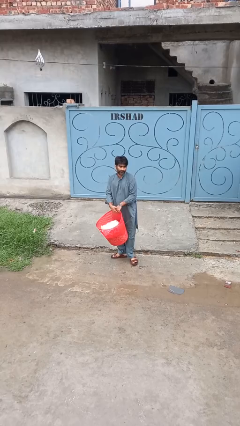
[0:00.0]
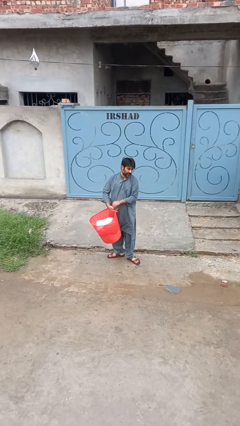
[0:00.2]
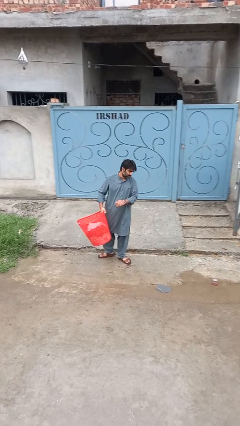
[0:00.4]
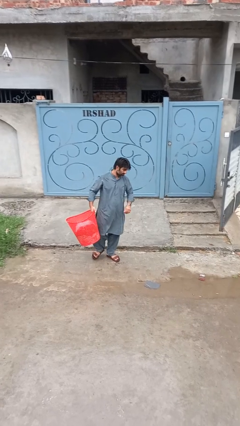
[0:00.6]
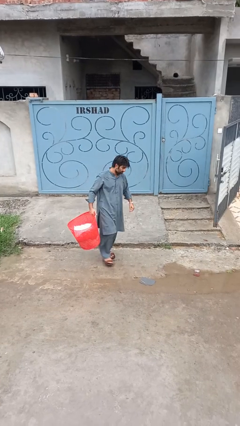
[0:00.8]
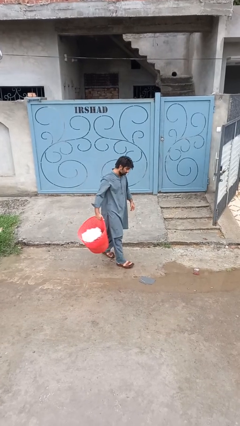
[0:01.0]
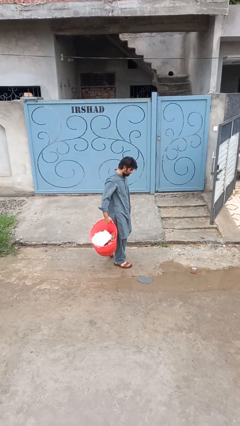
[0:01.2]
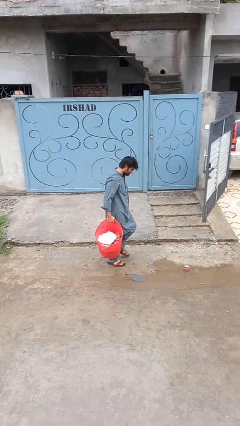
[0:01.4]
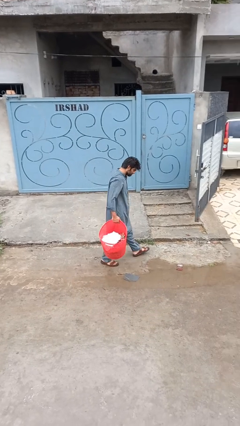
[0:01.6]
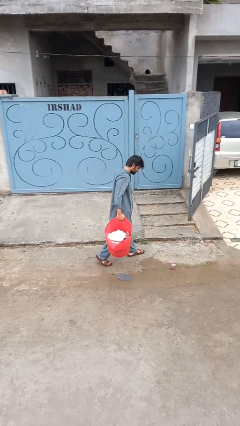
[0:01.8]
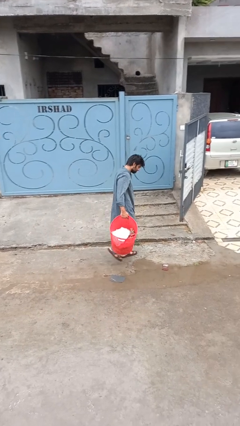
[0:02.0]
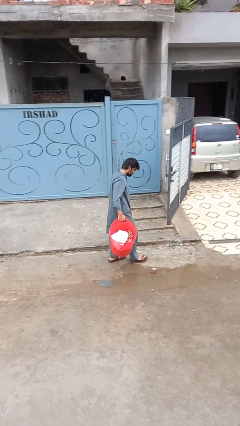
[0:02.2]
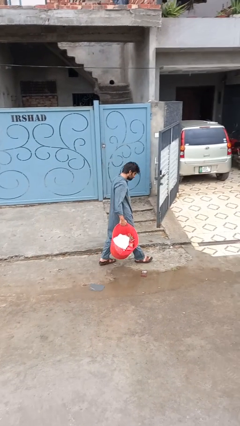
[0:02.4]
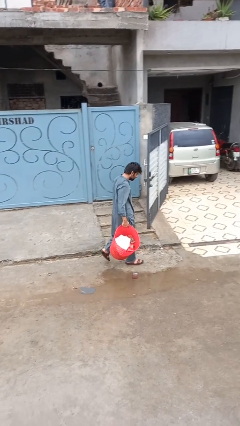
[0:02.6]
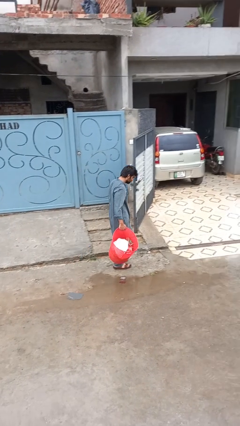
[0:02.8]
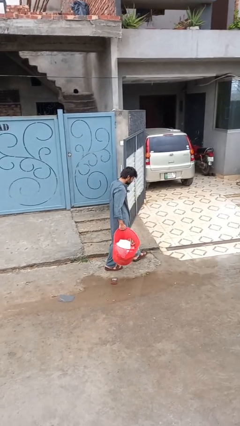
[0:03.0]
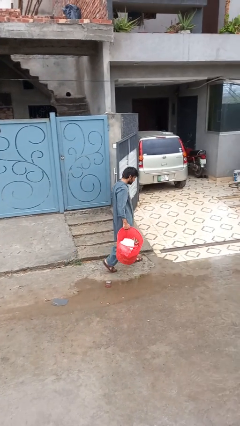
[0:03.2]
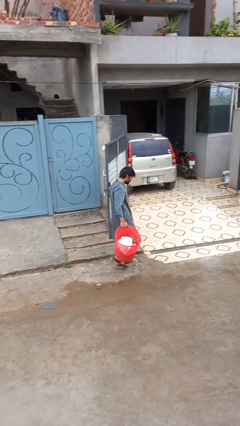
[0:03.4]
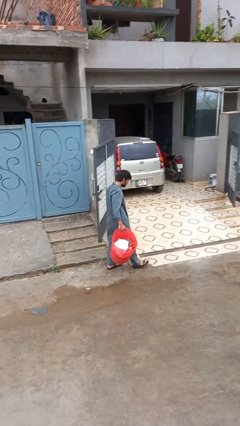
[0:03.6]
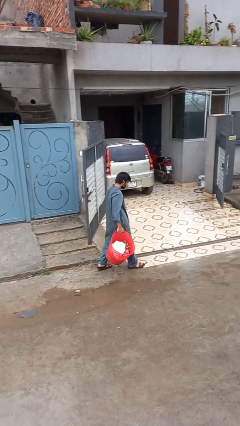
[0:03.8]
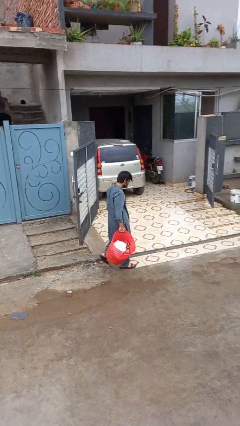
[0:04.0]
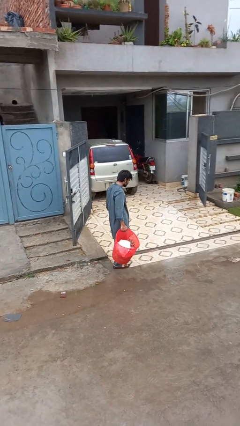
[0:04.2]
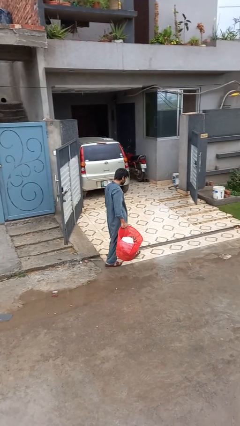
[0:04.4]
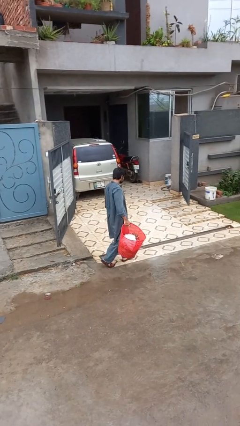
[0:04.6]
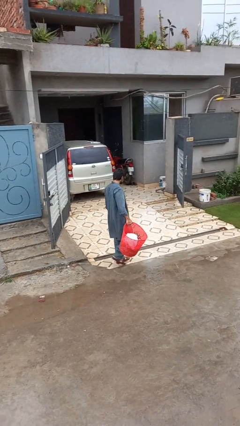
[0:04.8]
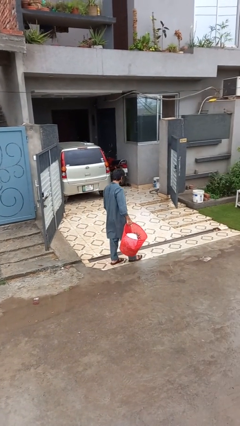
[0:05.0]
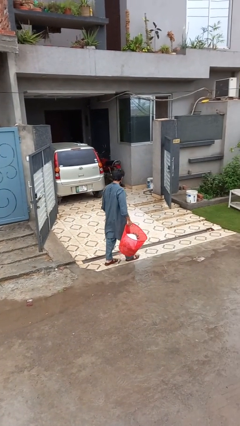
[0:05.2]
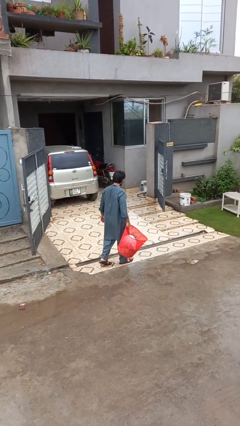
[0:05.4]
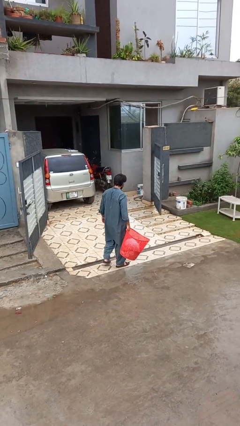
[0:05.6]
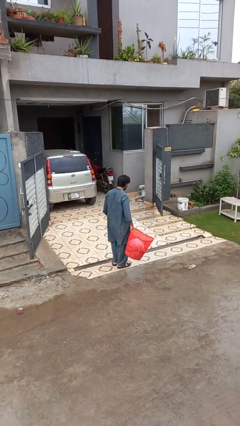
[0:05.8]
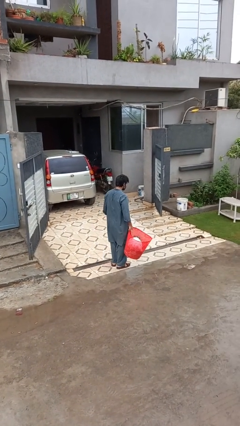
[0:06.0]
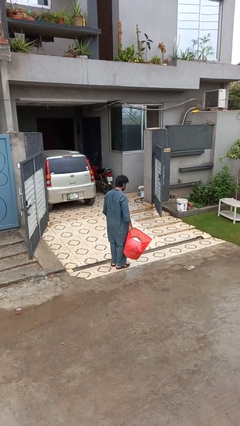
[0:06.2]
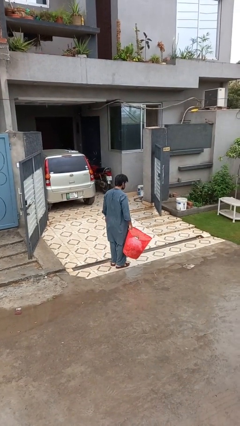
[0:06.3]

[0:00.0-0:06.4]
person carries laundry basket

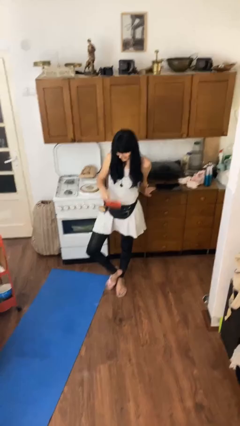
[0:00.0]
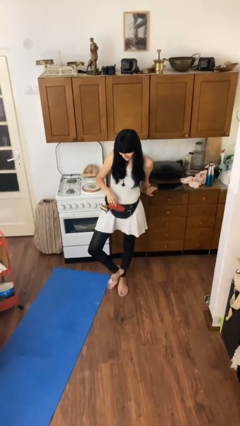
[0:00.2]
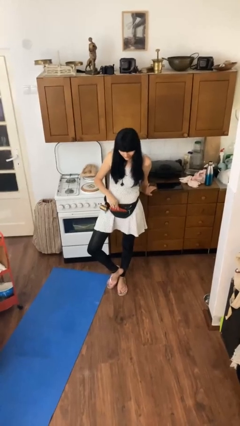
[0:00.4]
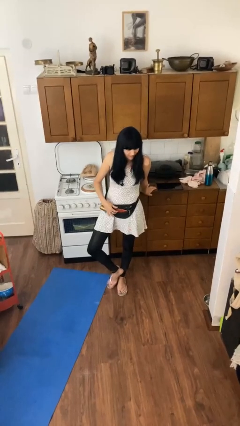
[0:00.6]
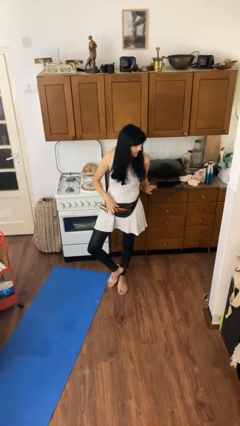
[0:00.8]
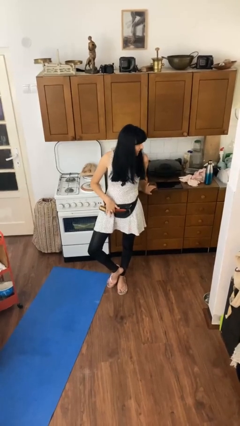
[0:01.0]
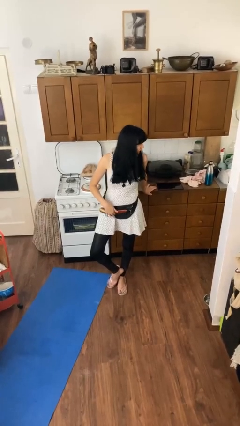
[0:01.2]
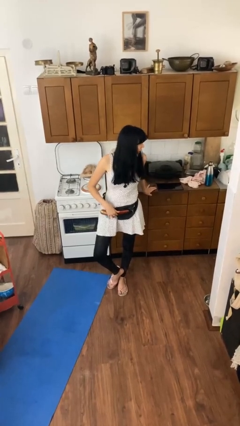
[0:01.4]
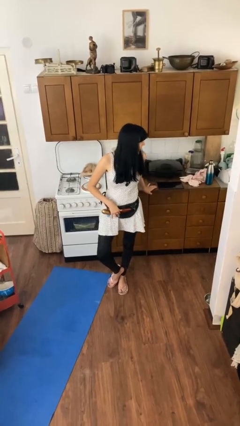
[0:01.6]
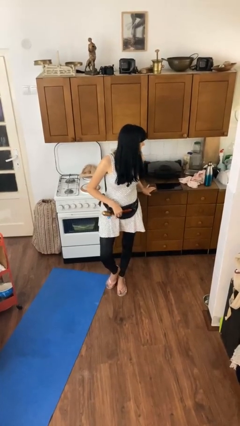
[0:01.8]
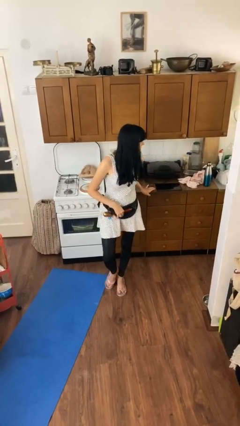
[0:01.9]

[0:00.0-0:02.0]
person puts phone into pocket

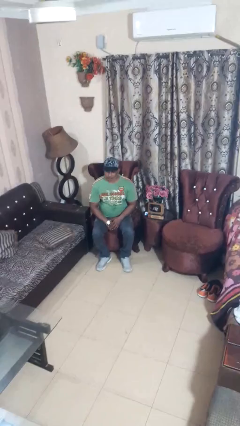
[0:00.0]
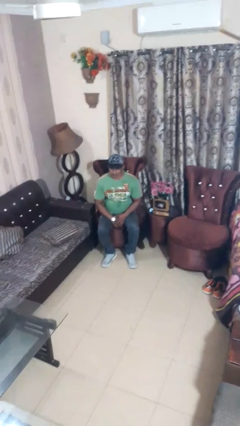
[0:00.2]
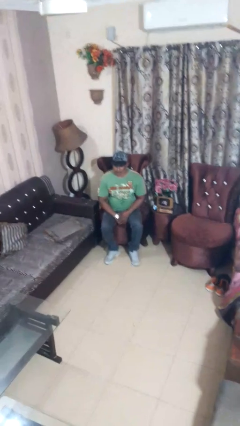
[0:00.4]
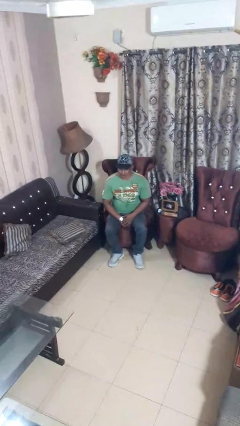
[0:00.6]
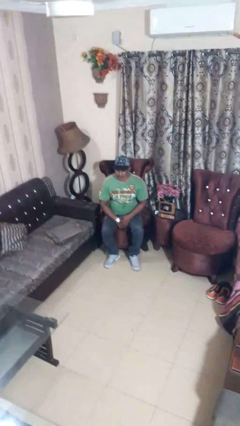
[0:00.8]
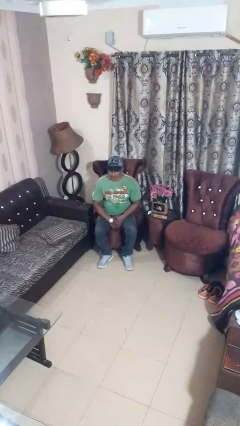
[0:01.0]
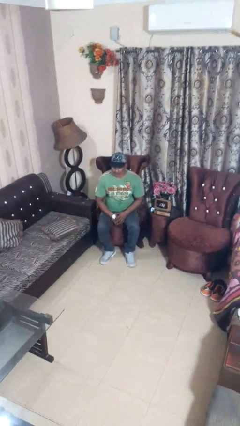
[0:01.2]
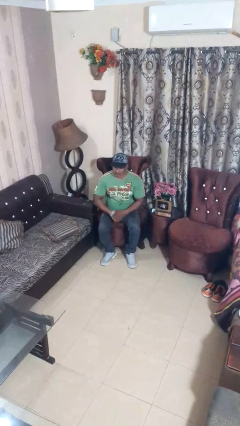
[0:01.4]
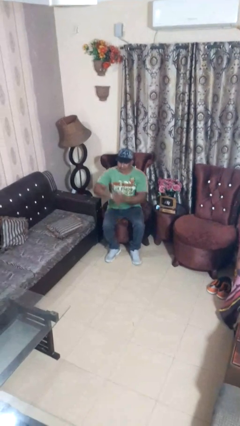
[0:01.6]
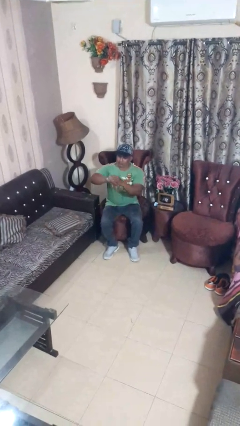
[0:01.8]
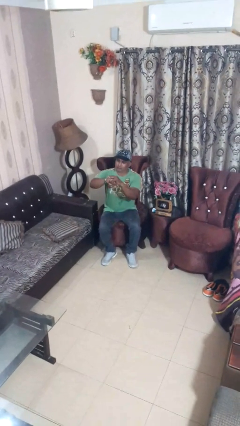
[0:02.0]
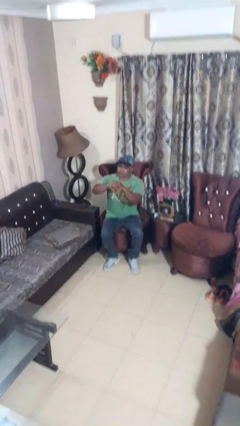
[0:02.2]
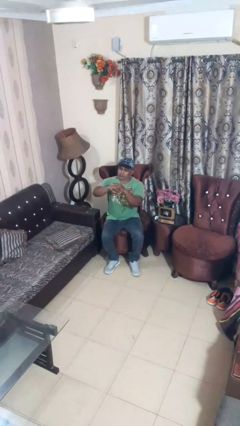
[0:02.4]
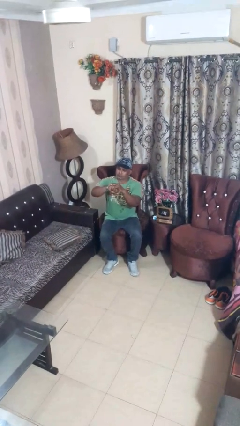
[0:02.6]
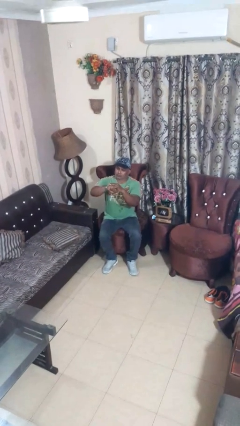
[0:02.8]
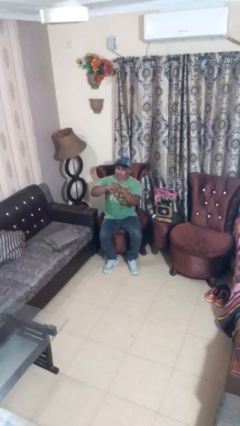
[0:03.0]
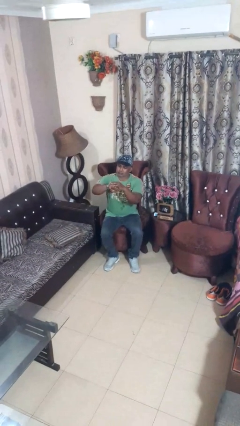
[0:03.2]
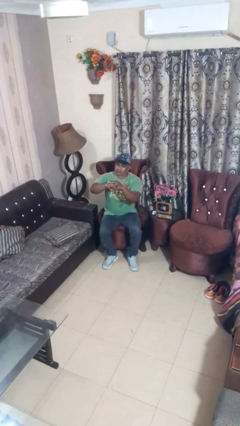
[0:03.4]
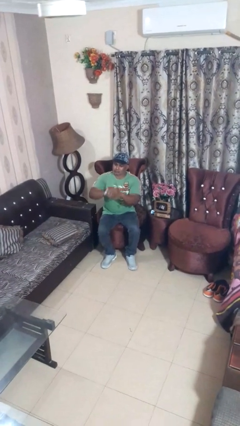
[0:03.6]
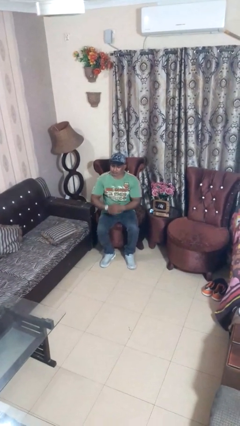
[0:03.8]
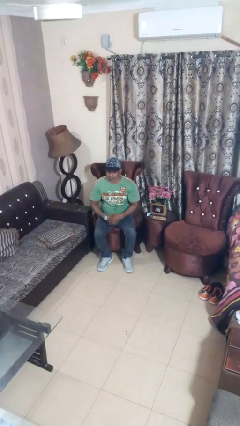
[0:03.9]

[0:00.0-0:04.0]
person looks at wristwatch

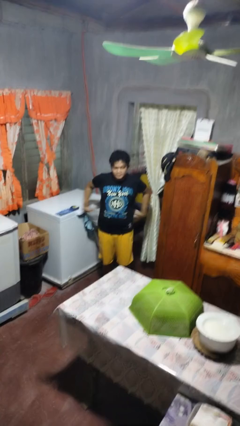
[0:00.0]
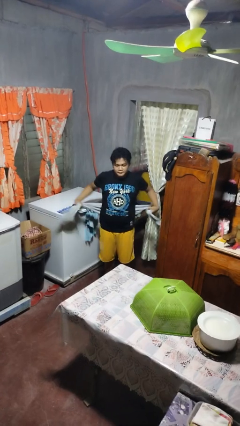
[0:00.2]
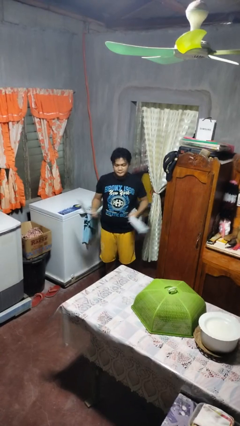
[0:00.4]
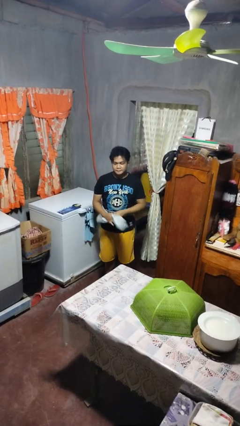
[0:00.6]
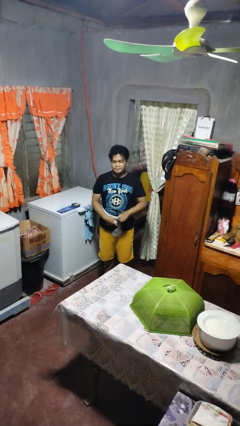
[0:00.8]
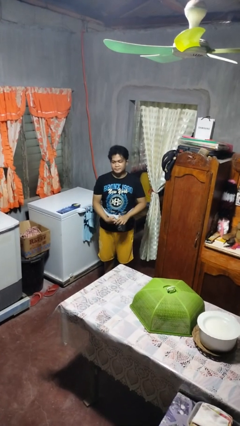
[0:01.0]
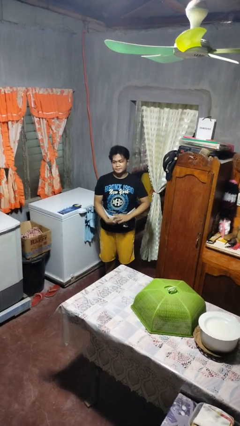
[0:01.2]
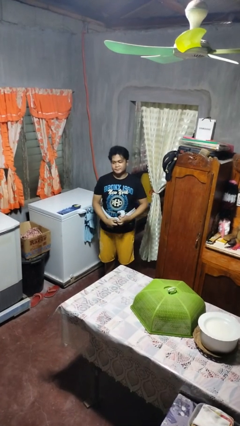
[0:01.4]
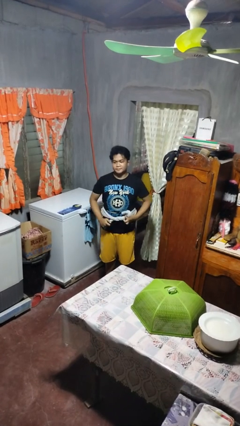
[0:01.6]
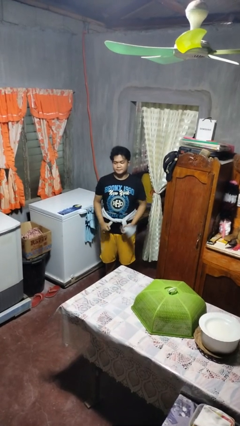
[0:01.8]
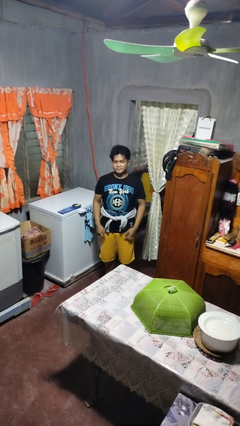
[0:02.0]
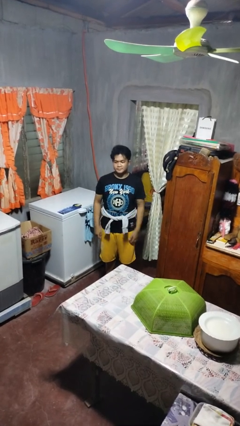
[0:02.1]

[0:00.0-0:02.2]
person ties jacket around waist

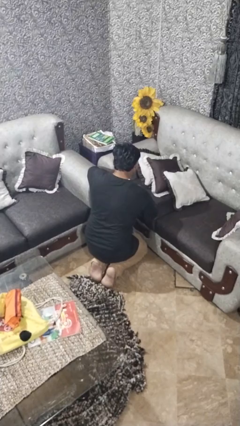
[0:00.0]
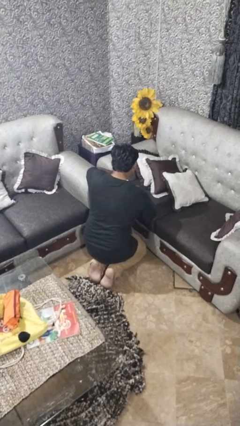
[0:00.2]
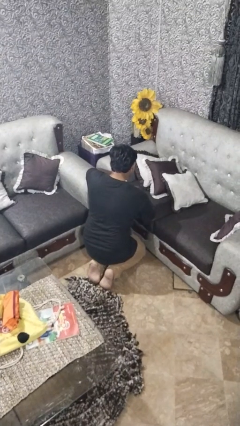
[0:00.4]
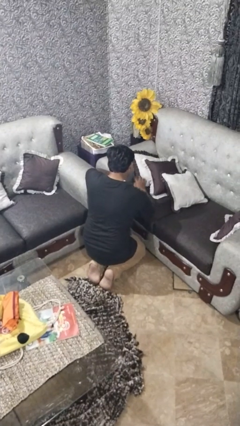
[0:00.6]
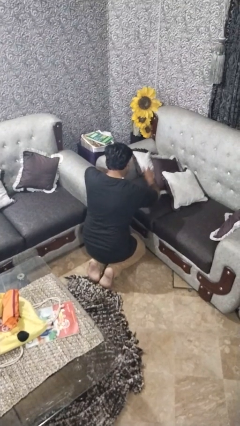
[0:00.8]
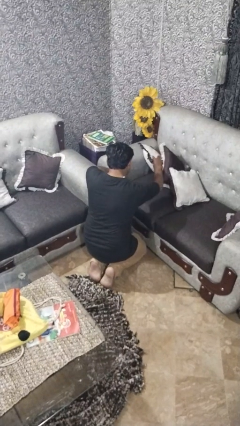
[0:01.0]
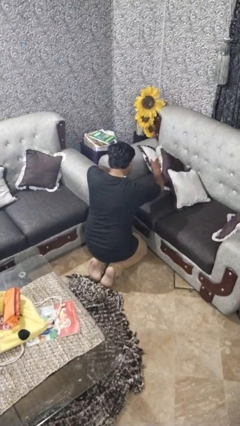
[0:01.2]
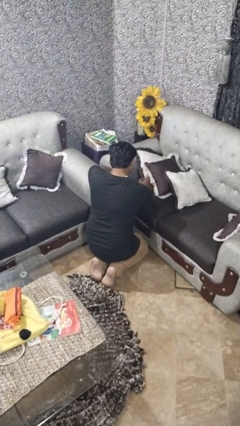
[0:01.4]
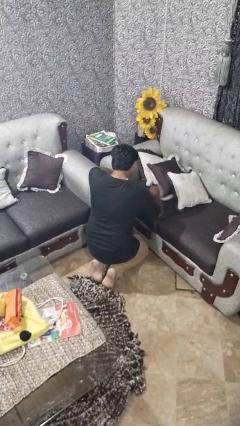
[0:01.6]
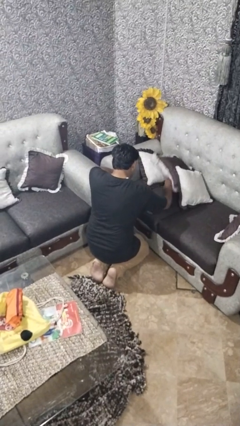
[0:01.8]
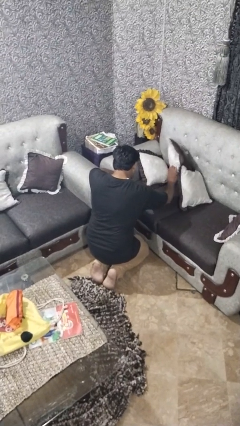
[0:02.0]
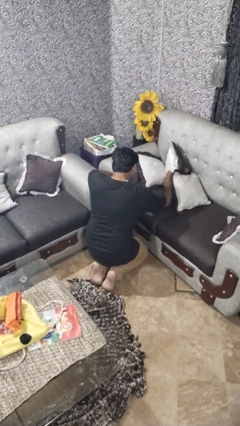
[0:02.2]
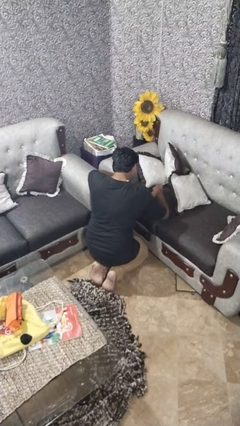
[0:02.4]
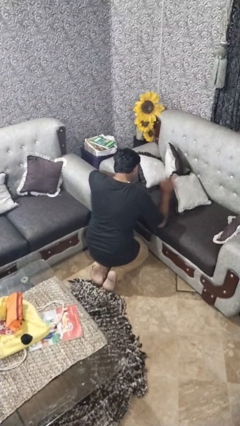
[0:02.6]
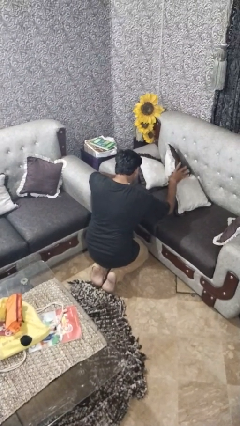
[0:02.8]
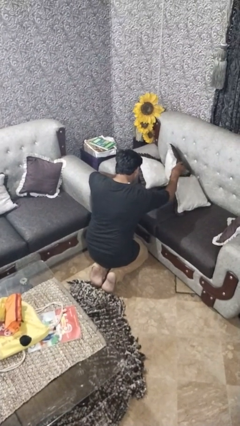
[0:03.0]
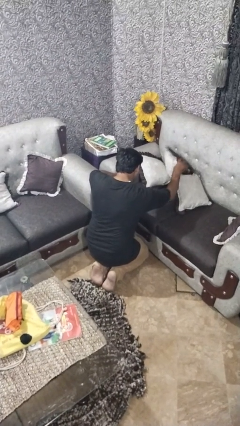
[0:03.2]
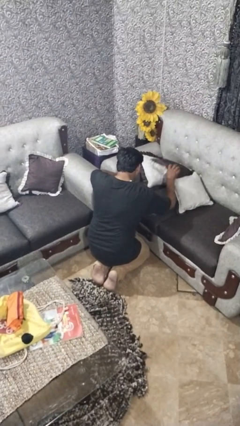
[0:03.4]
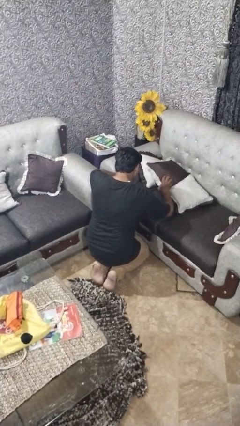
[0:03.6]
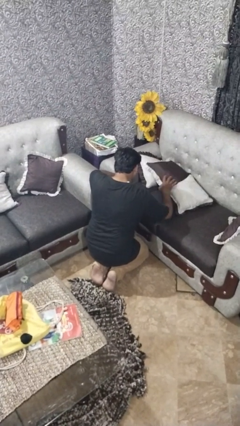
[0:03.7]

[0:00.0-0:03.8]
person searches in couch
